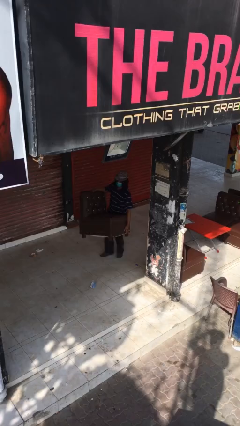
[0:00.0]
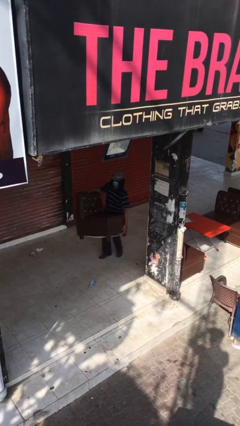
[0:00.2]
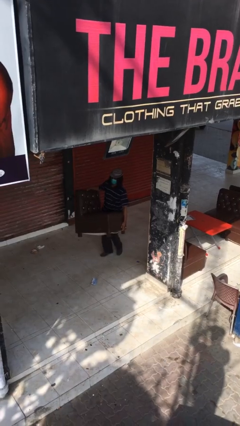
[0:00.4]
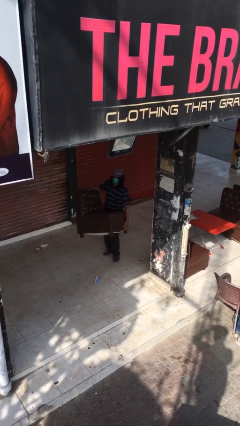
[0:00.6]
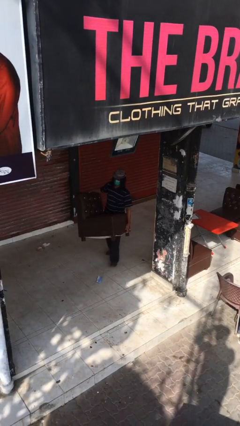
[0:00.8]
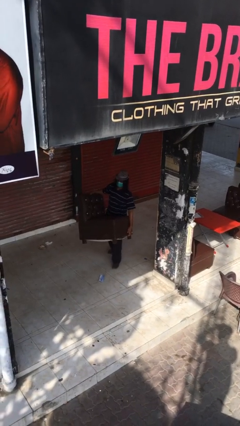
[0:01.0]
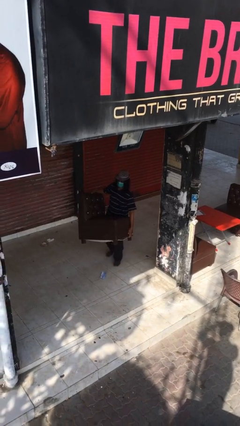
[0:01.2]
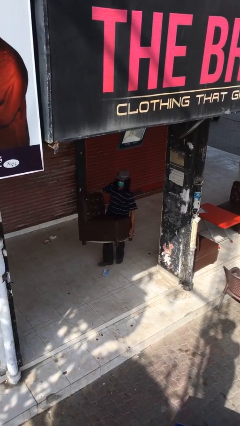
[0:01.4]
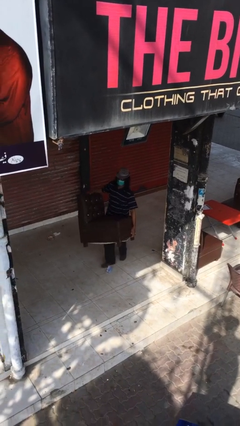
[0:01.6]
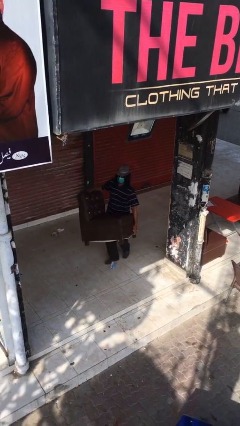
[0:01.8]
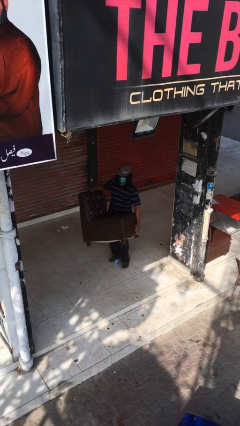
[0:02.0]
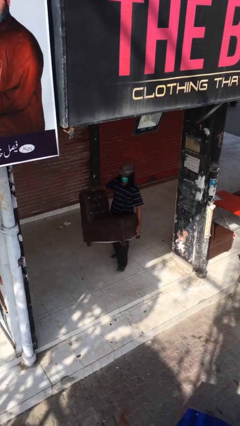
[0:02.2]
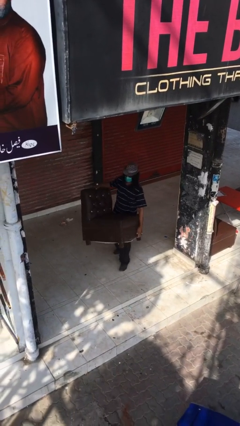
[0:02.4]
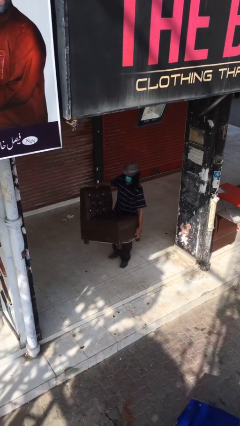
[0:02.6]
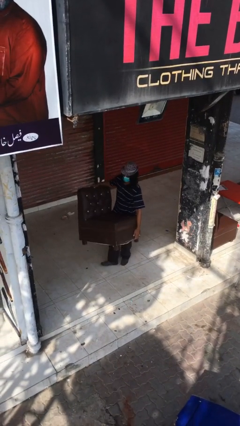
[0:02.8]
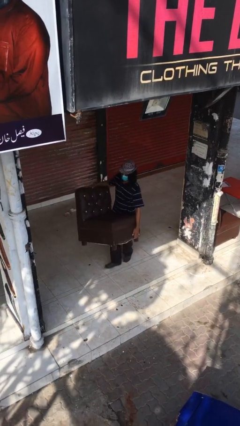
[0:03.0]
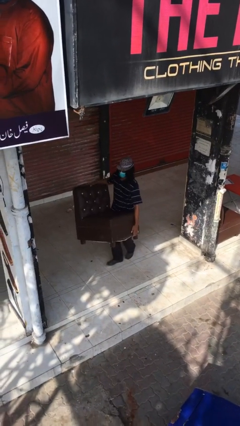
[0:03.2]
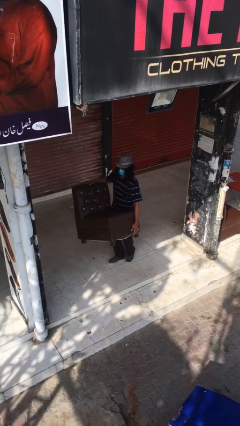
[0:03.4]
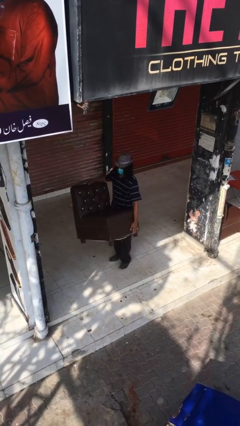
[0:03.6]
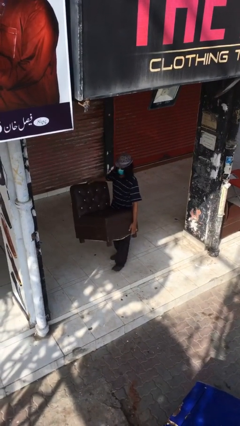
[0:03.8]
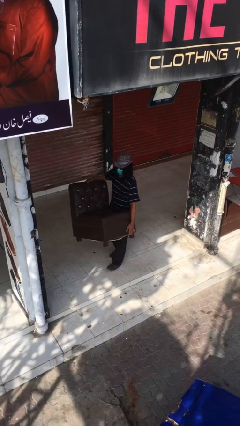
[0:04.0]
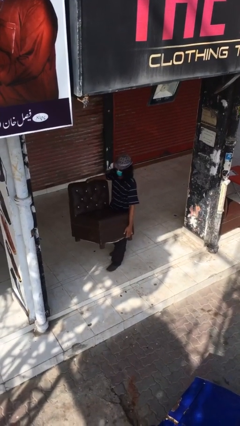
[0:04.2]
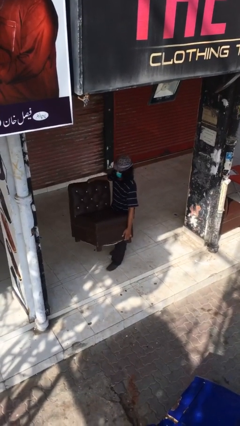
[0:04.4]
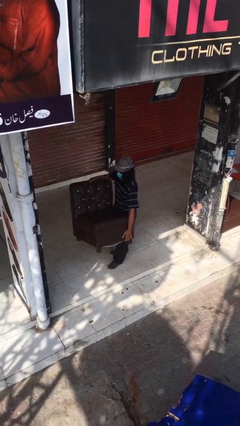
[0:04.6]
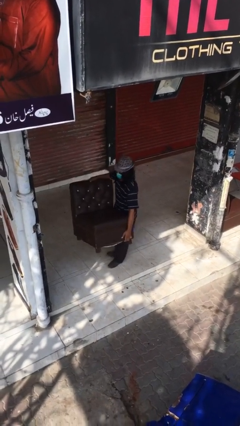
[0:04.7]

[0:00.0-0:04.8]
person carries heavy object

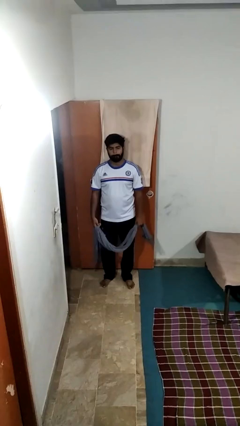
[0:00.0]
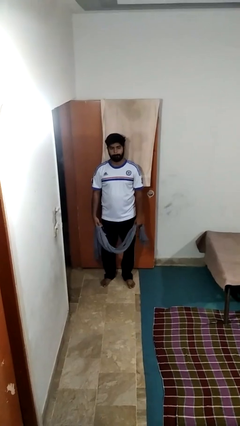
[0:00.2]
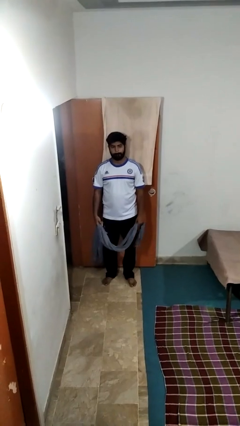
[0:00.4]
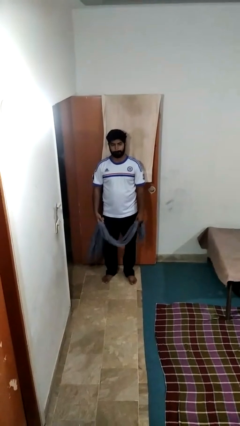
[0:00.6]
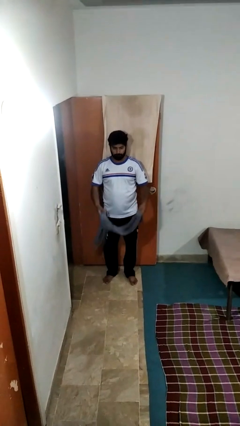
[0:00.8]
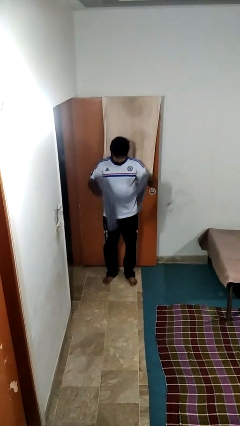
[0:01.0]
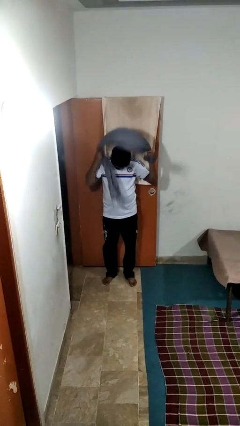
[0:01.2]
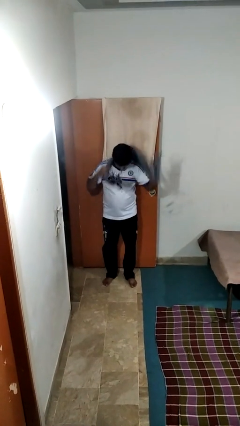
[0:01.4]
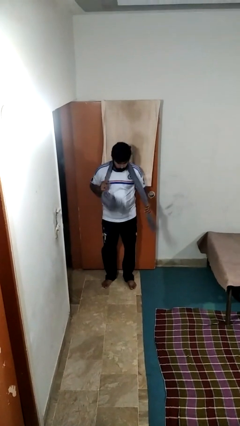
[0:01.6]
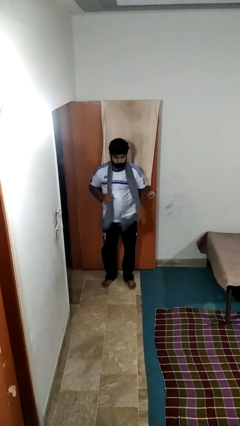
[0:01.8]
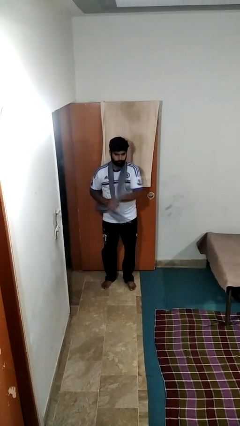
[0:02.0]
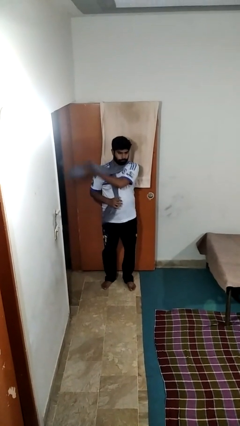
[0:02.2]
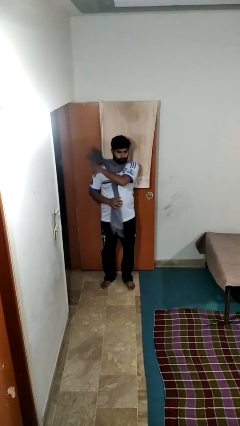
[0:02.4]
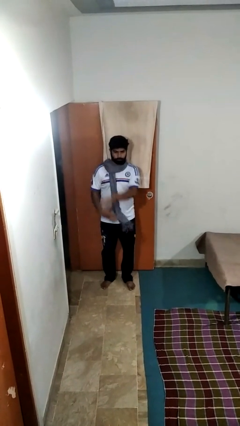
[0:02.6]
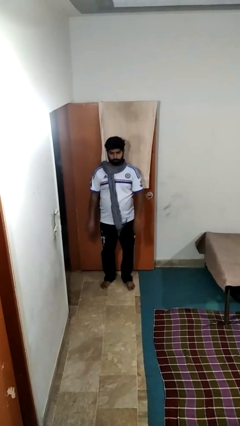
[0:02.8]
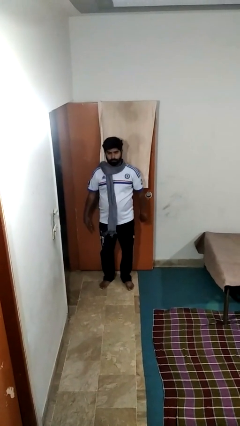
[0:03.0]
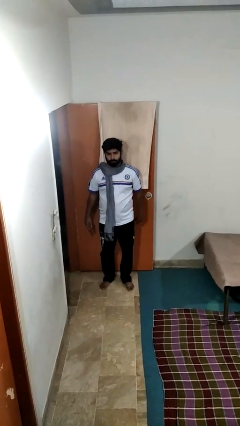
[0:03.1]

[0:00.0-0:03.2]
person puts on scarf

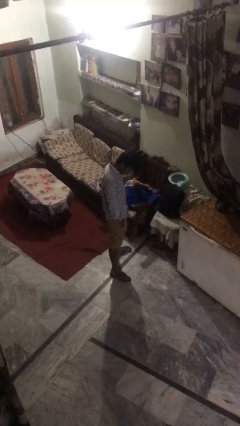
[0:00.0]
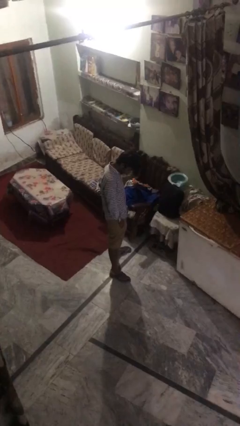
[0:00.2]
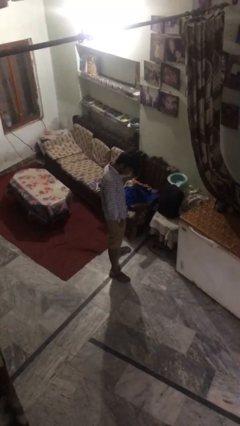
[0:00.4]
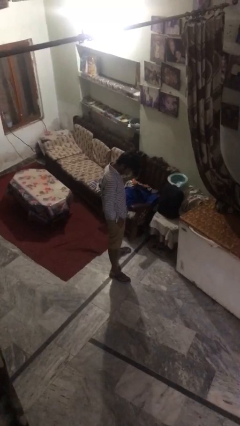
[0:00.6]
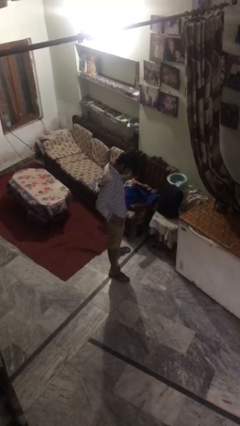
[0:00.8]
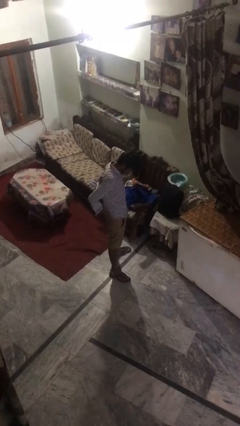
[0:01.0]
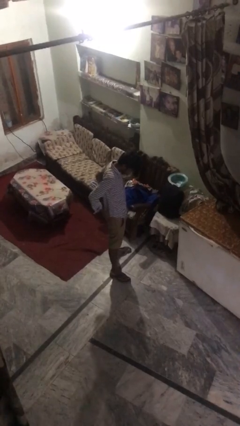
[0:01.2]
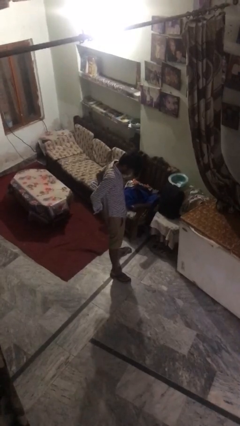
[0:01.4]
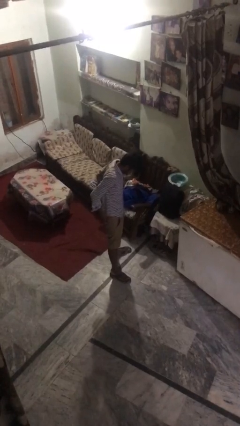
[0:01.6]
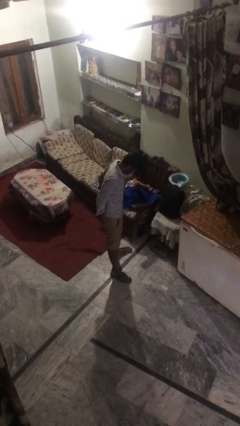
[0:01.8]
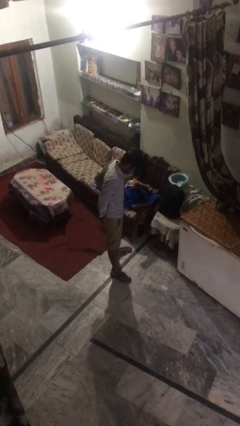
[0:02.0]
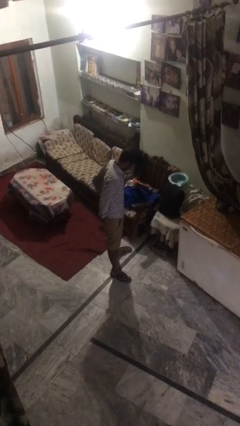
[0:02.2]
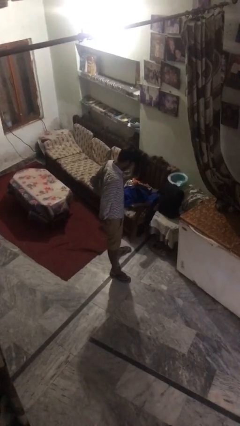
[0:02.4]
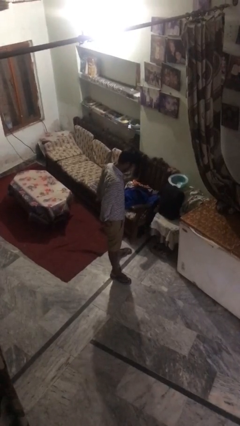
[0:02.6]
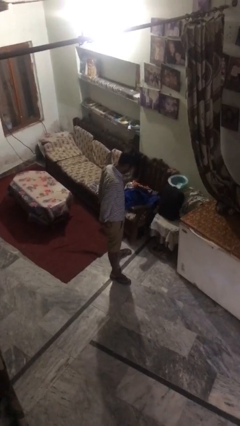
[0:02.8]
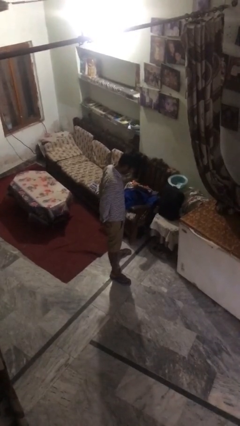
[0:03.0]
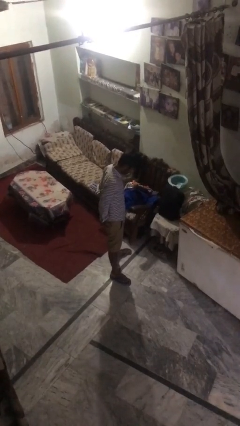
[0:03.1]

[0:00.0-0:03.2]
person puts hands in back pockets

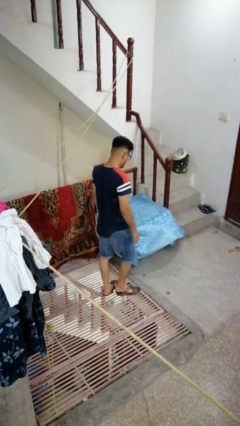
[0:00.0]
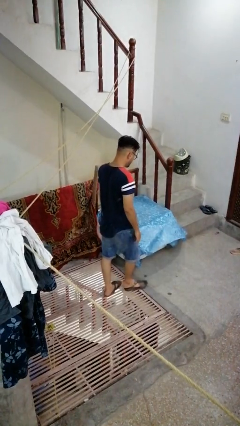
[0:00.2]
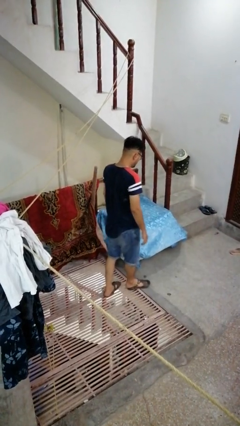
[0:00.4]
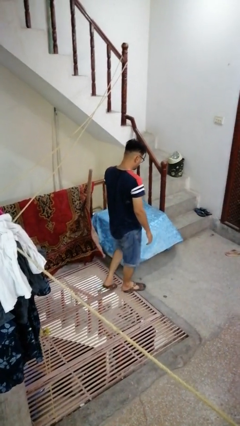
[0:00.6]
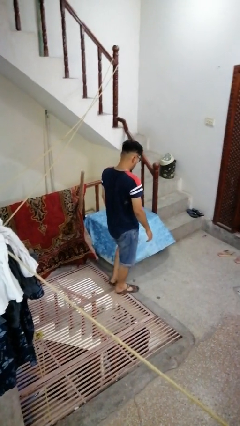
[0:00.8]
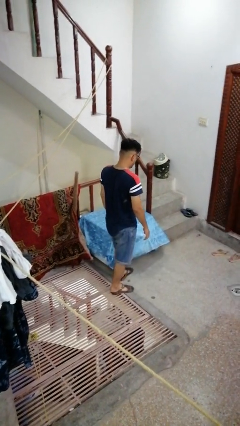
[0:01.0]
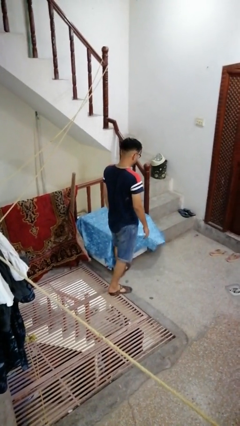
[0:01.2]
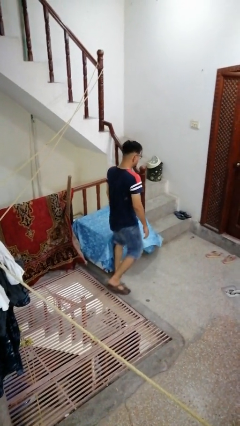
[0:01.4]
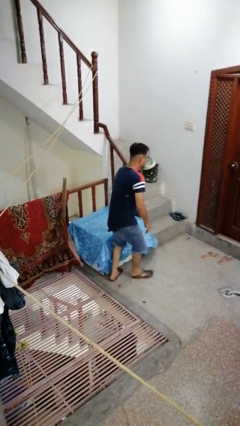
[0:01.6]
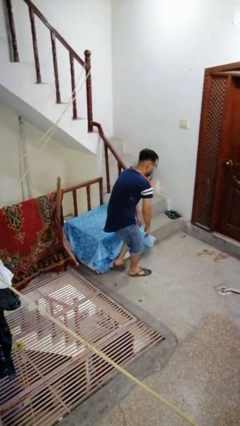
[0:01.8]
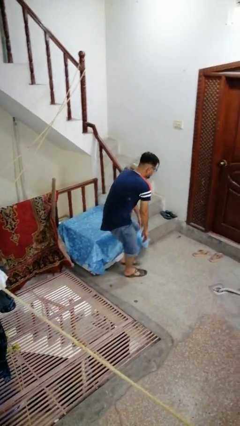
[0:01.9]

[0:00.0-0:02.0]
person bumps into table

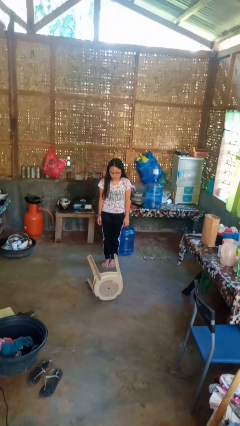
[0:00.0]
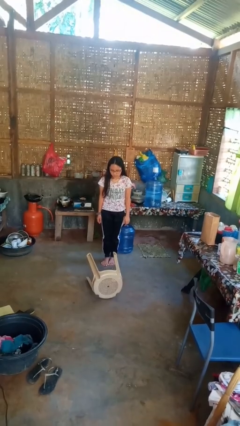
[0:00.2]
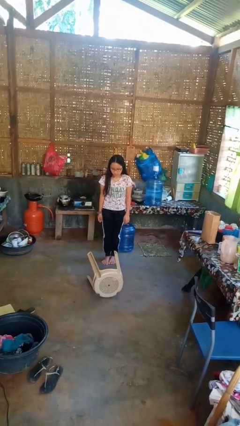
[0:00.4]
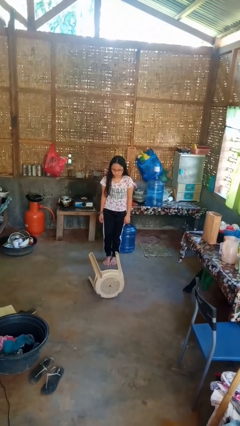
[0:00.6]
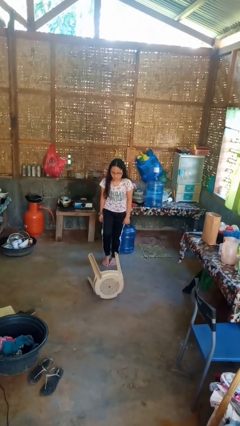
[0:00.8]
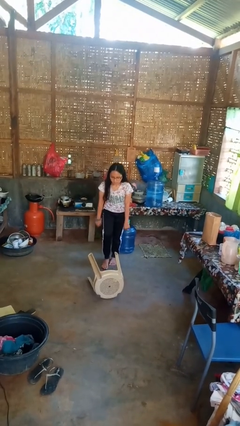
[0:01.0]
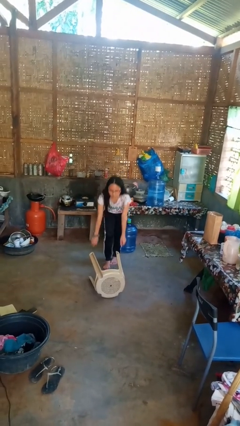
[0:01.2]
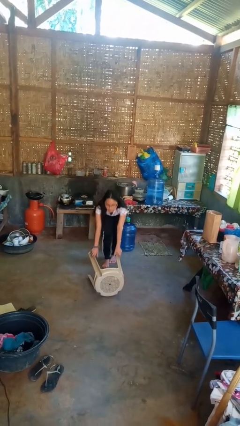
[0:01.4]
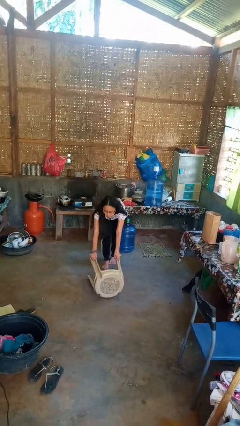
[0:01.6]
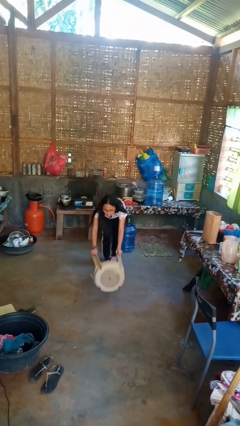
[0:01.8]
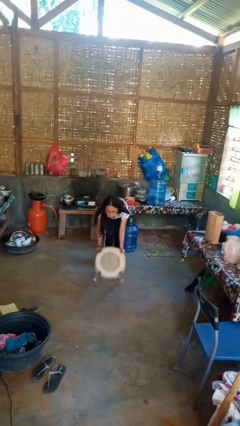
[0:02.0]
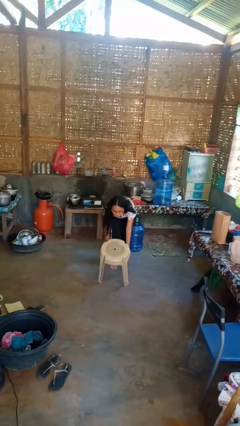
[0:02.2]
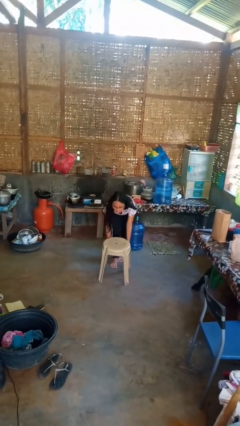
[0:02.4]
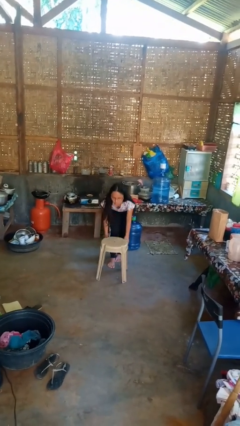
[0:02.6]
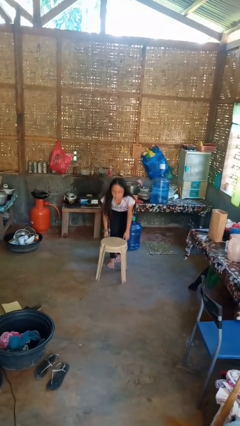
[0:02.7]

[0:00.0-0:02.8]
person sets upright furniture

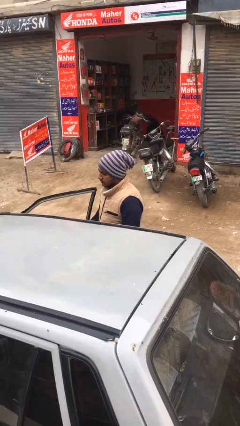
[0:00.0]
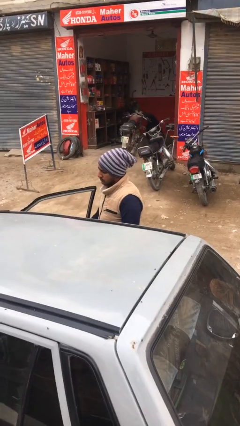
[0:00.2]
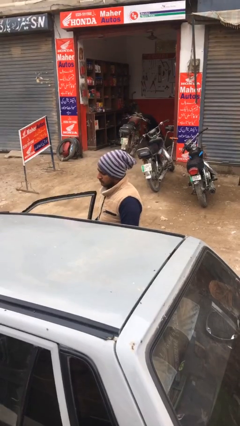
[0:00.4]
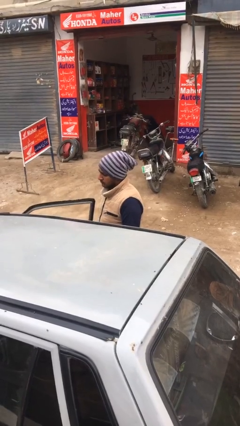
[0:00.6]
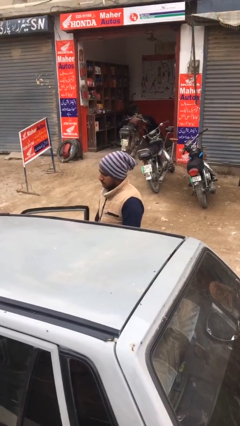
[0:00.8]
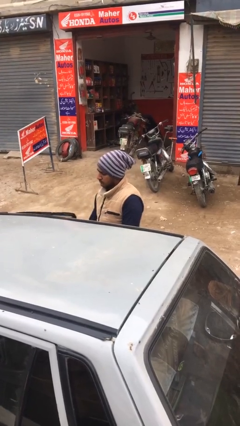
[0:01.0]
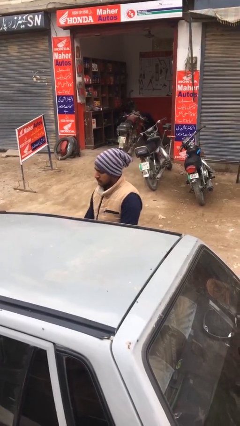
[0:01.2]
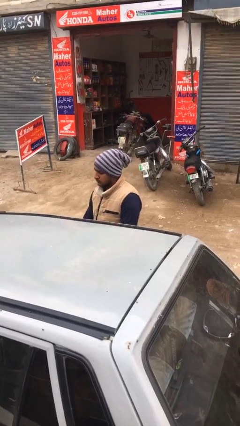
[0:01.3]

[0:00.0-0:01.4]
person closes car door
